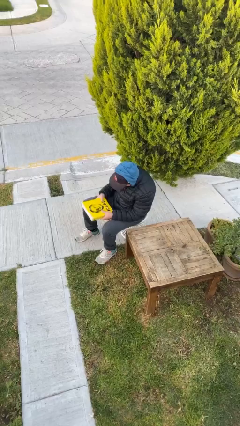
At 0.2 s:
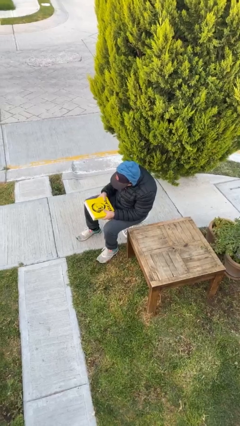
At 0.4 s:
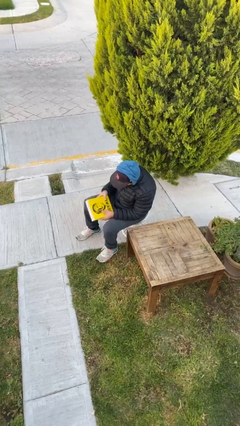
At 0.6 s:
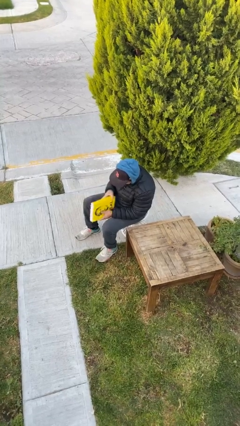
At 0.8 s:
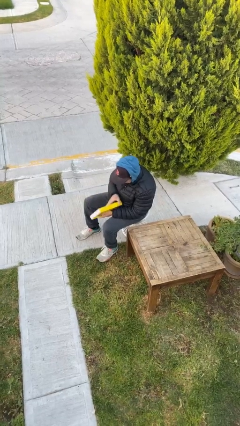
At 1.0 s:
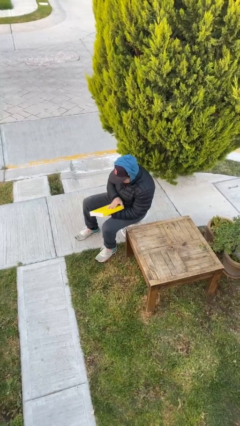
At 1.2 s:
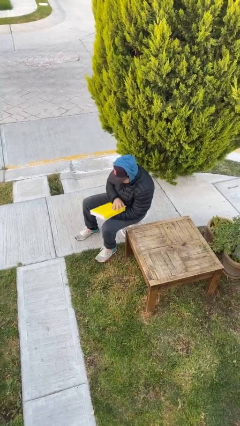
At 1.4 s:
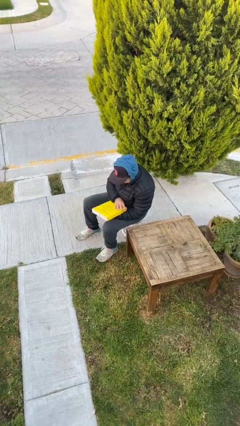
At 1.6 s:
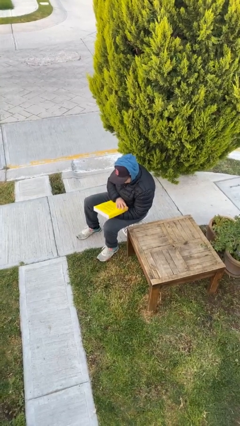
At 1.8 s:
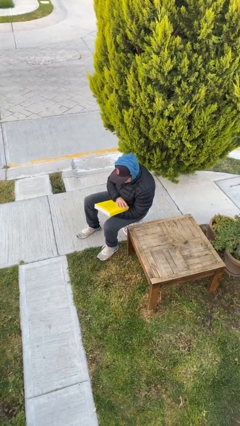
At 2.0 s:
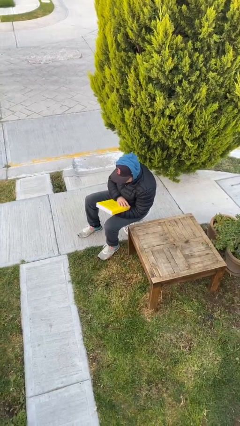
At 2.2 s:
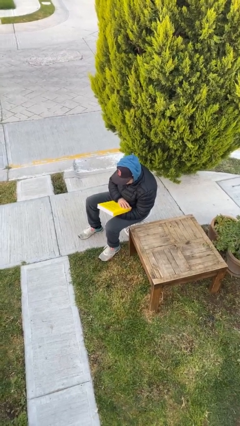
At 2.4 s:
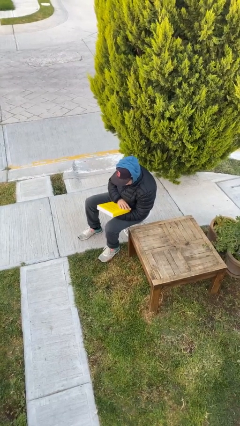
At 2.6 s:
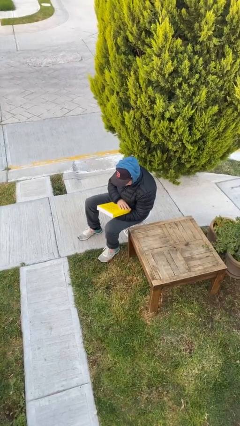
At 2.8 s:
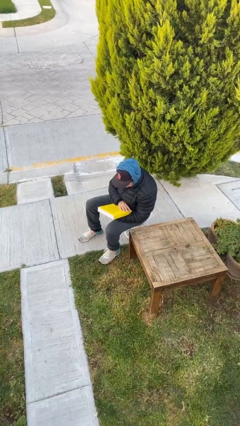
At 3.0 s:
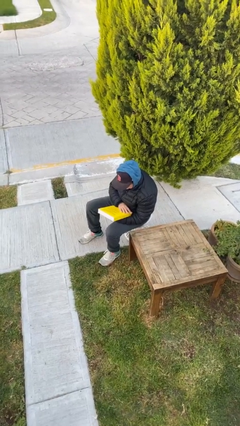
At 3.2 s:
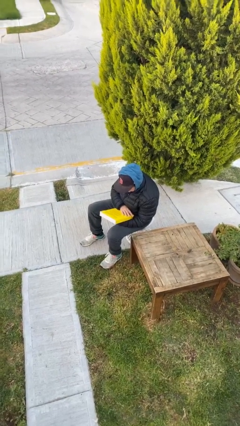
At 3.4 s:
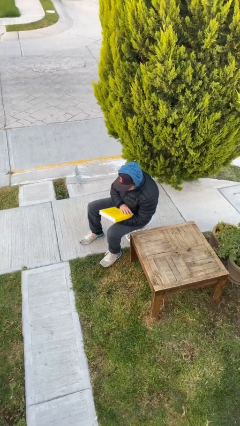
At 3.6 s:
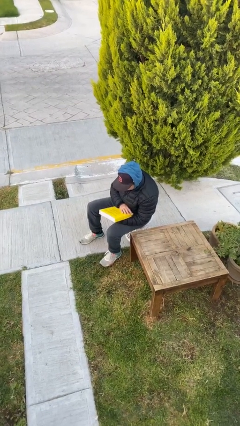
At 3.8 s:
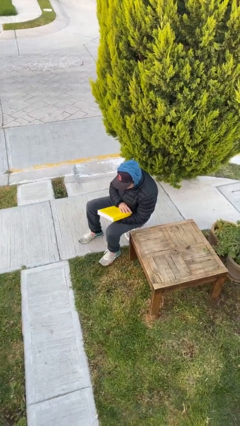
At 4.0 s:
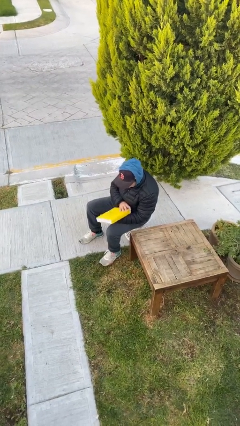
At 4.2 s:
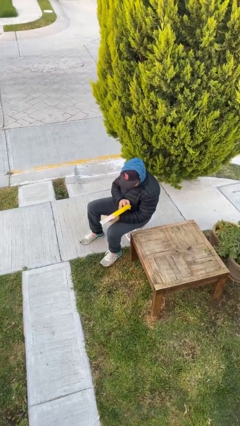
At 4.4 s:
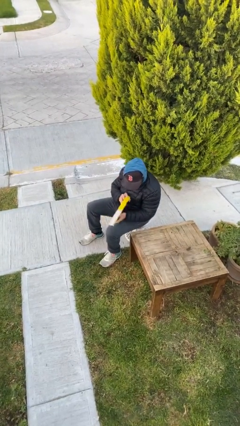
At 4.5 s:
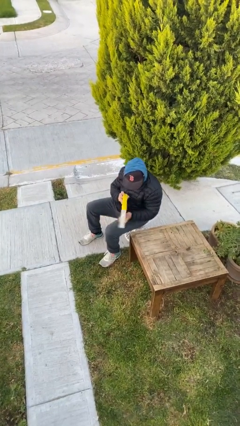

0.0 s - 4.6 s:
person reads document

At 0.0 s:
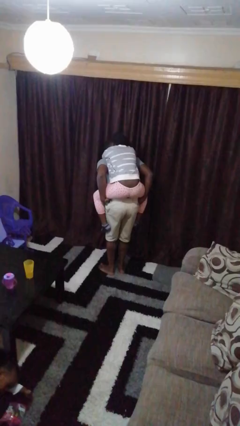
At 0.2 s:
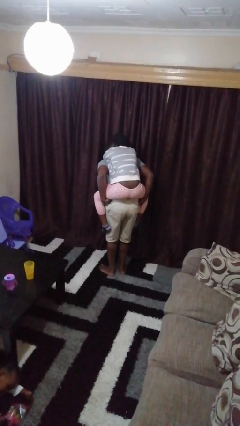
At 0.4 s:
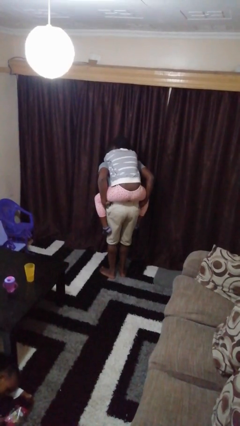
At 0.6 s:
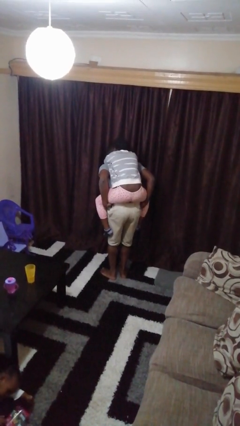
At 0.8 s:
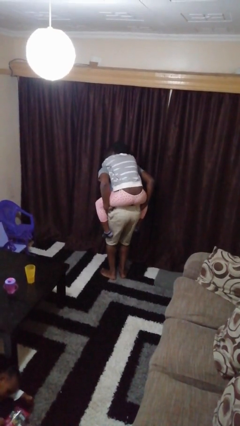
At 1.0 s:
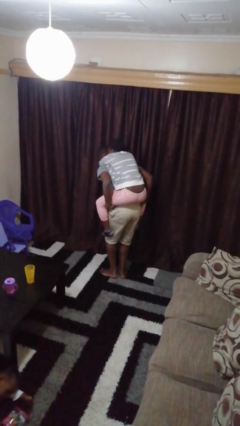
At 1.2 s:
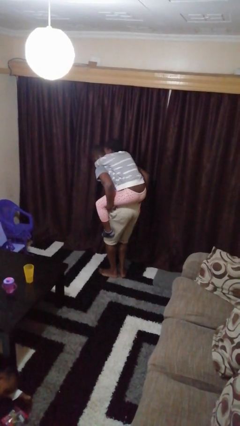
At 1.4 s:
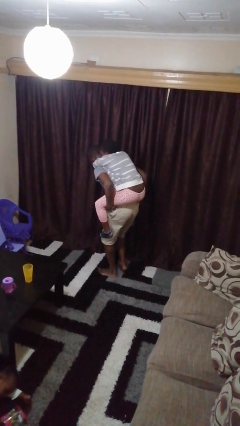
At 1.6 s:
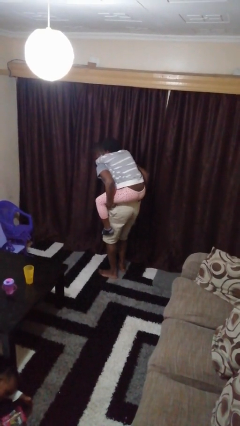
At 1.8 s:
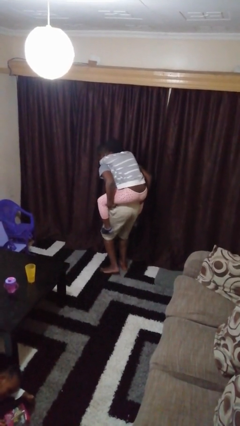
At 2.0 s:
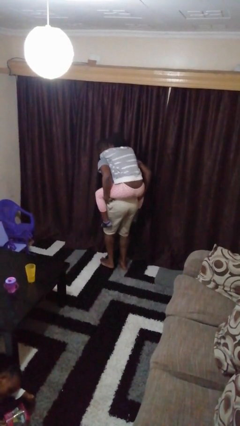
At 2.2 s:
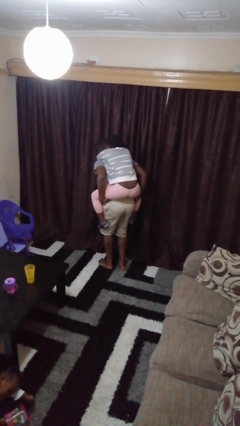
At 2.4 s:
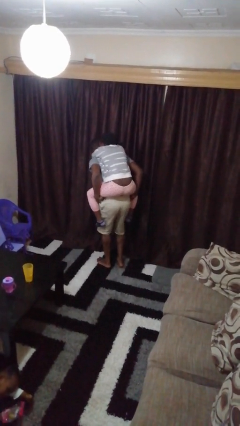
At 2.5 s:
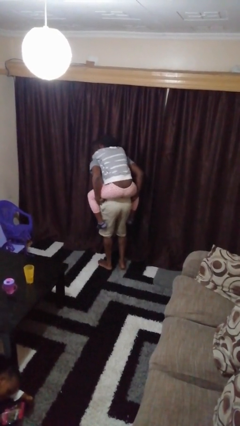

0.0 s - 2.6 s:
person carries person on back

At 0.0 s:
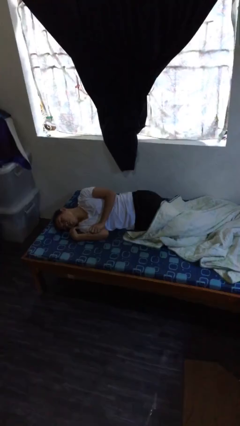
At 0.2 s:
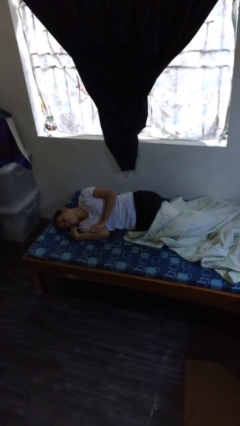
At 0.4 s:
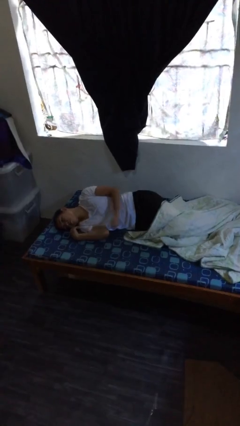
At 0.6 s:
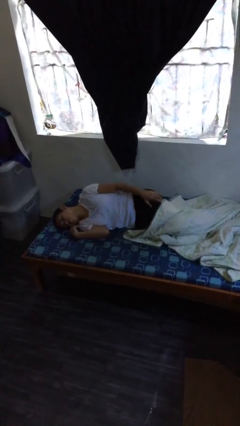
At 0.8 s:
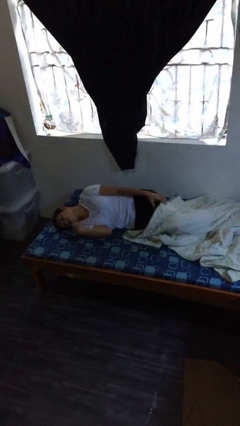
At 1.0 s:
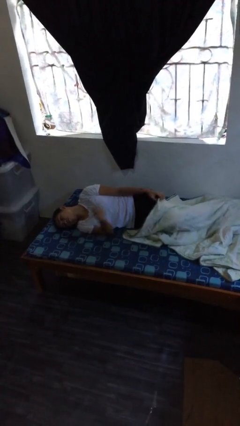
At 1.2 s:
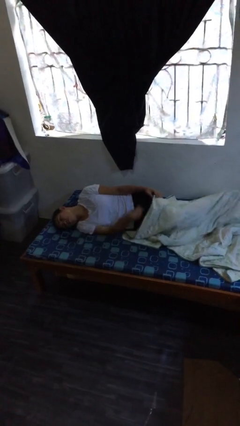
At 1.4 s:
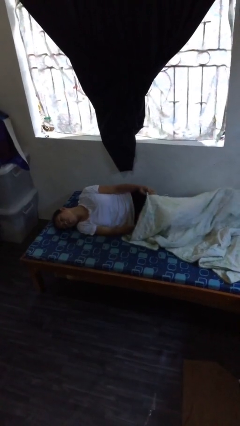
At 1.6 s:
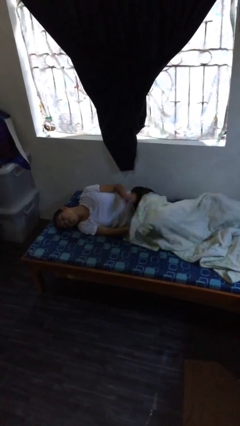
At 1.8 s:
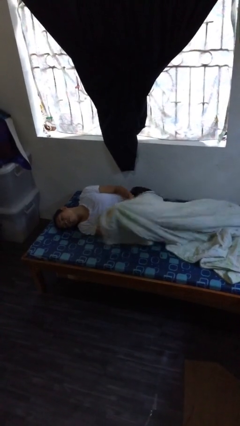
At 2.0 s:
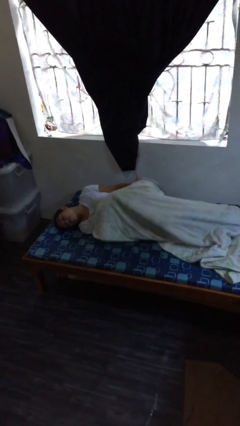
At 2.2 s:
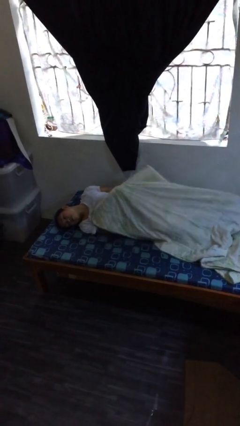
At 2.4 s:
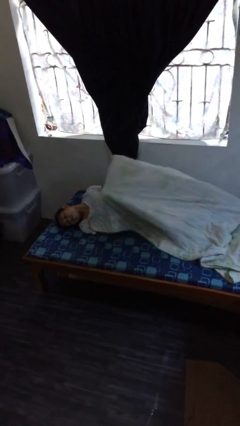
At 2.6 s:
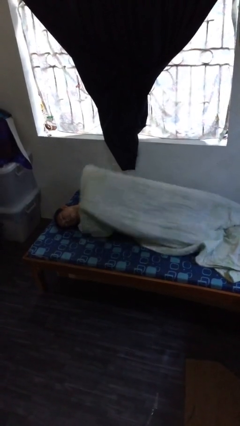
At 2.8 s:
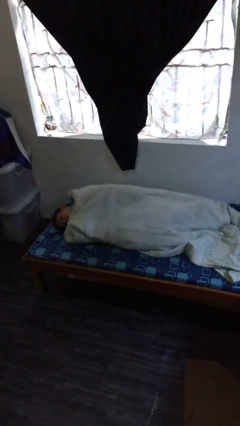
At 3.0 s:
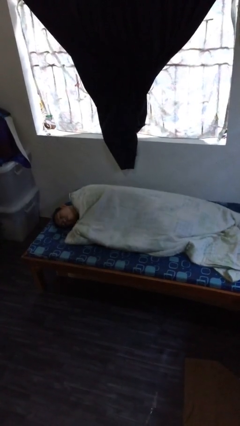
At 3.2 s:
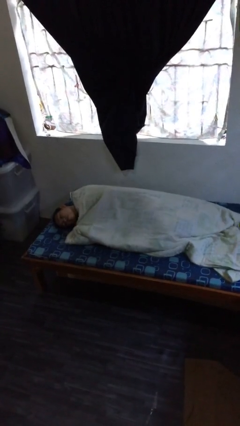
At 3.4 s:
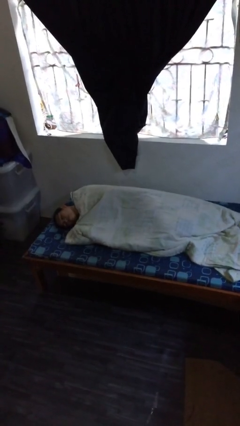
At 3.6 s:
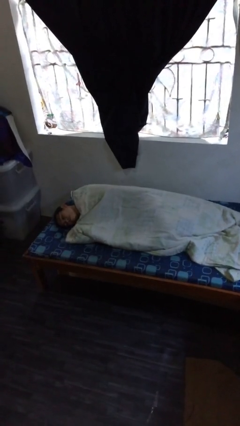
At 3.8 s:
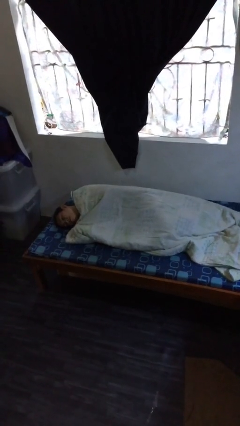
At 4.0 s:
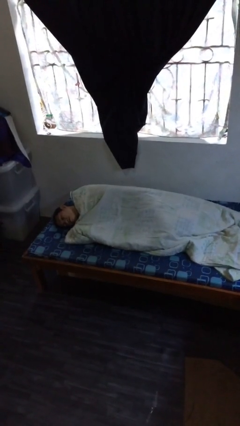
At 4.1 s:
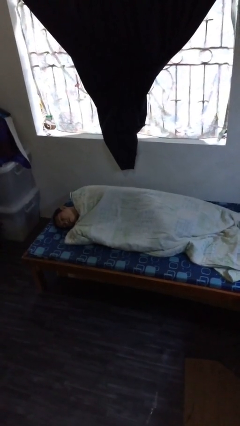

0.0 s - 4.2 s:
person covers with bedsheets

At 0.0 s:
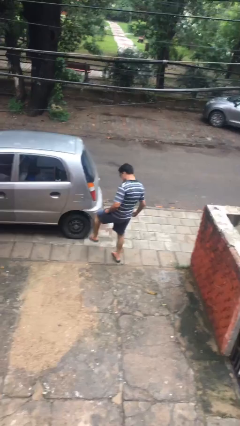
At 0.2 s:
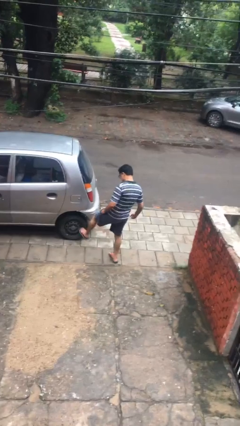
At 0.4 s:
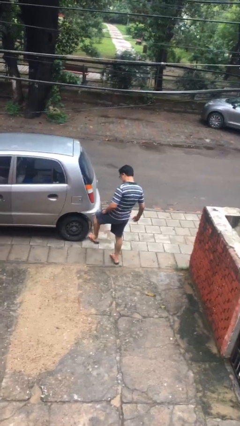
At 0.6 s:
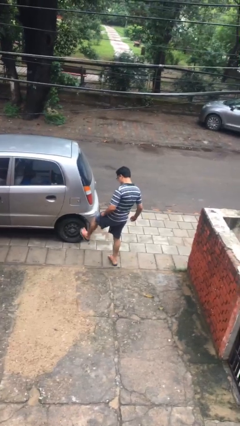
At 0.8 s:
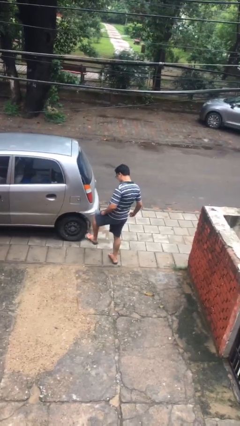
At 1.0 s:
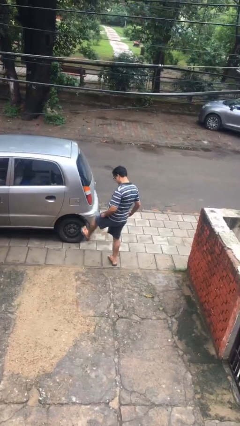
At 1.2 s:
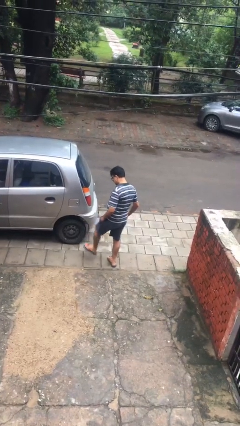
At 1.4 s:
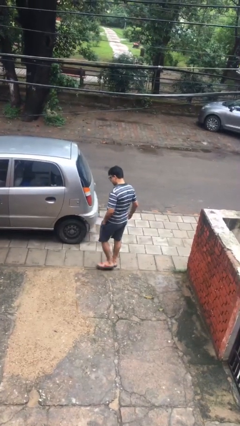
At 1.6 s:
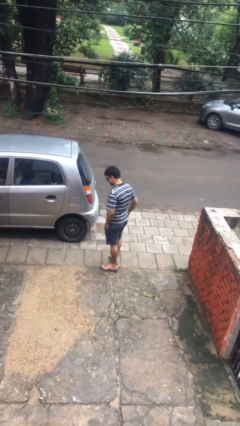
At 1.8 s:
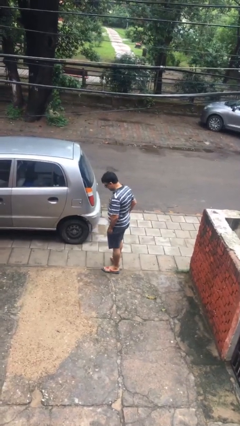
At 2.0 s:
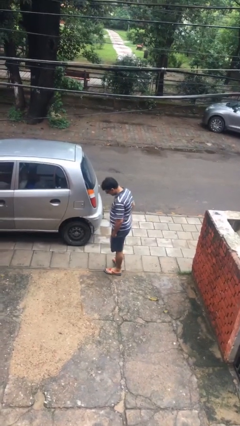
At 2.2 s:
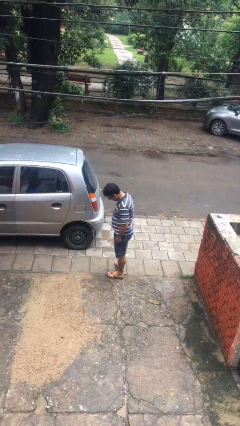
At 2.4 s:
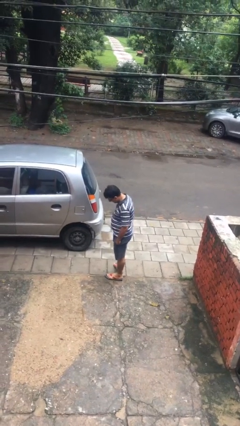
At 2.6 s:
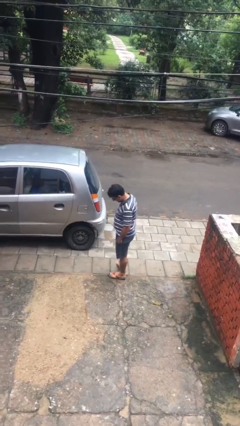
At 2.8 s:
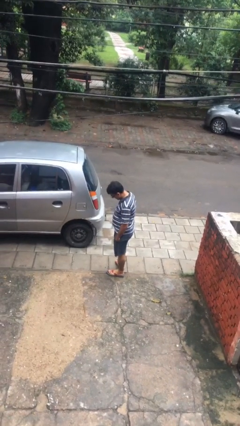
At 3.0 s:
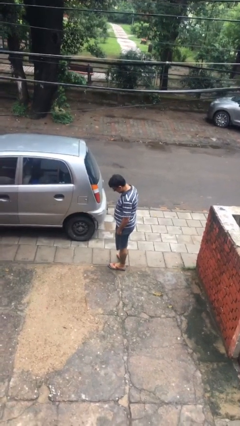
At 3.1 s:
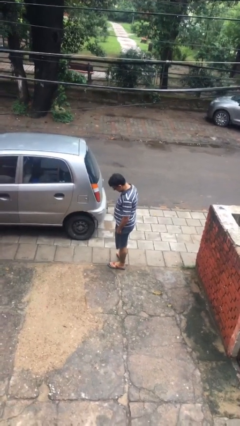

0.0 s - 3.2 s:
person kicks car tires

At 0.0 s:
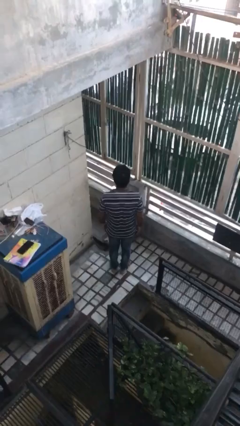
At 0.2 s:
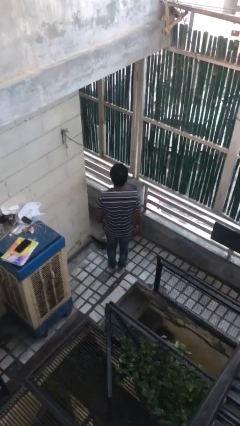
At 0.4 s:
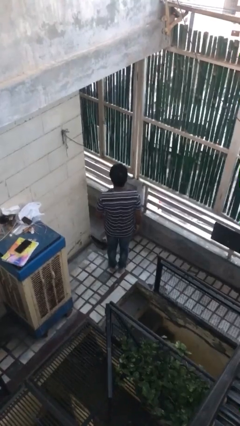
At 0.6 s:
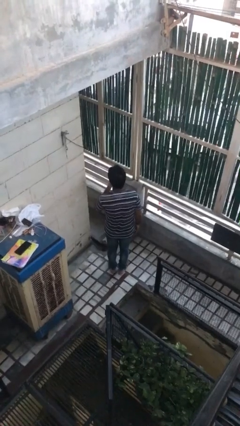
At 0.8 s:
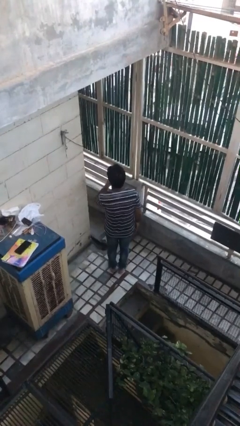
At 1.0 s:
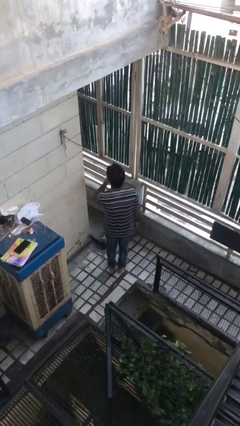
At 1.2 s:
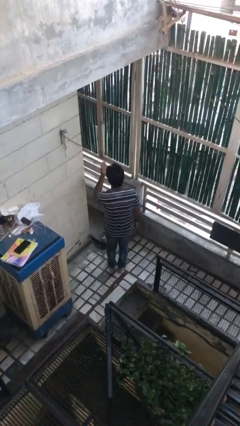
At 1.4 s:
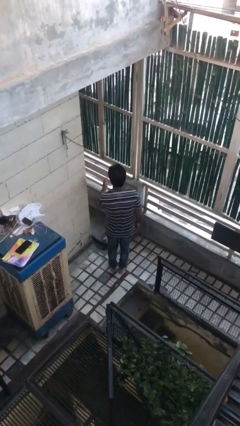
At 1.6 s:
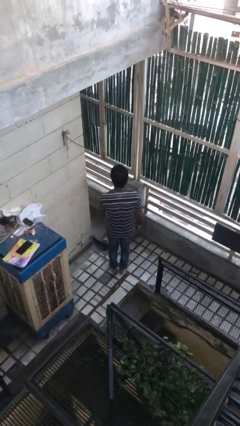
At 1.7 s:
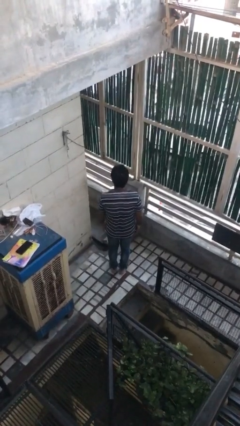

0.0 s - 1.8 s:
person gestures blow kiss

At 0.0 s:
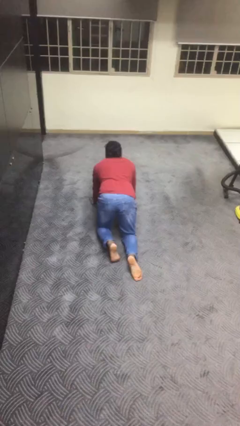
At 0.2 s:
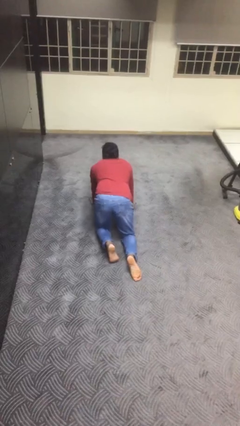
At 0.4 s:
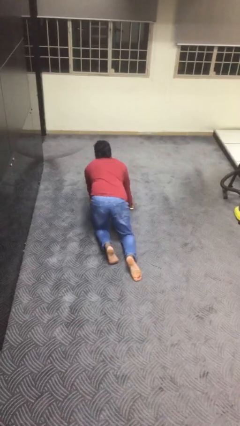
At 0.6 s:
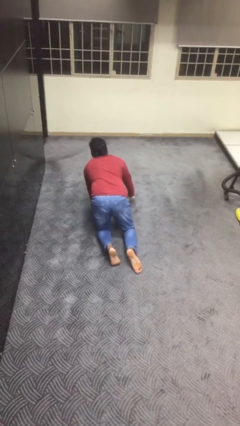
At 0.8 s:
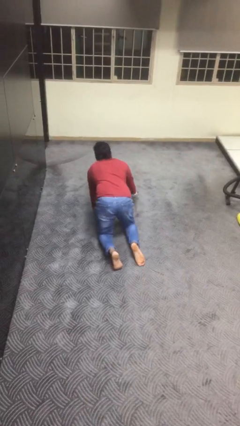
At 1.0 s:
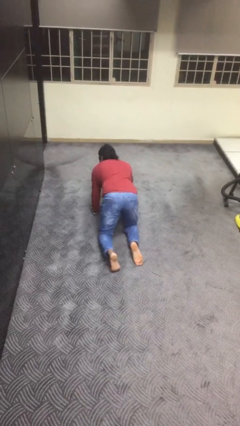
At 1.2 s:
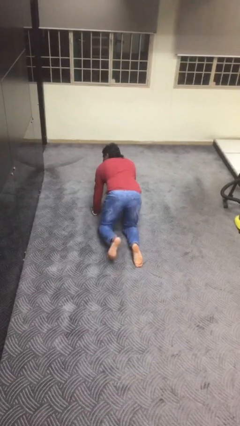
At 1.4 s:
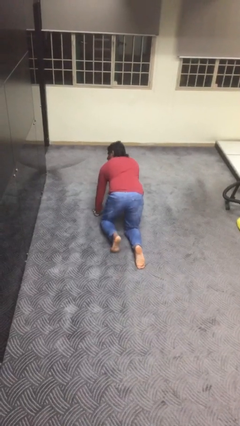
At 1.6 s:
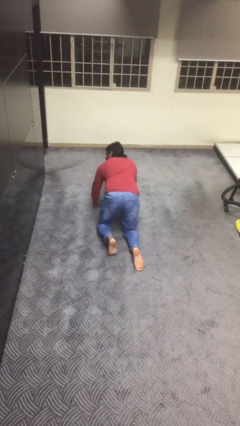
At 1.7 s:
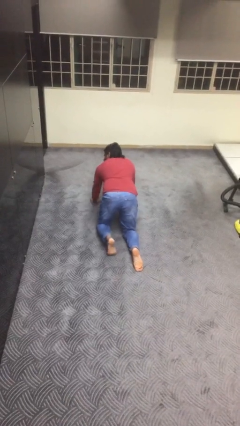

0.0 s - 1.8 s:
person crawls
